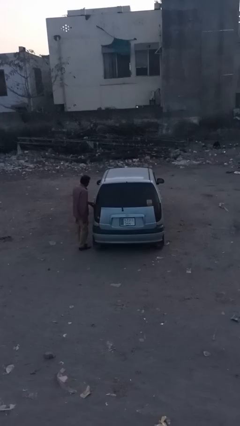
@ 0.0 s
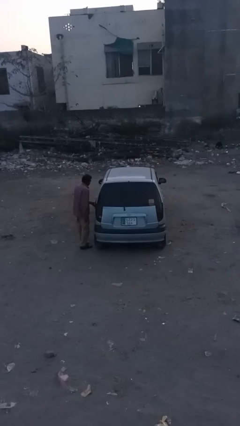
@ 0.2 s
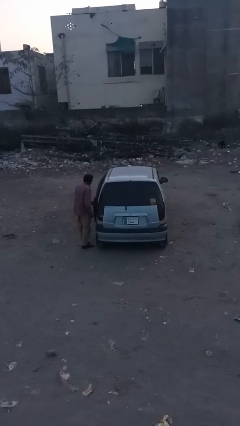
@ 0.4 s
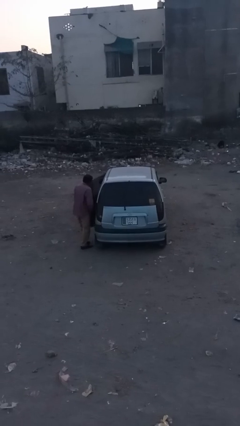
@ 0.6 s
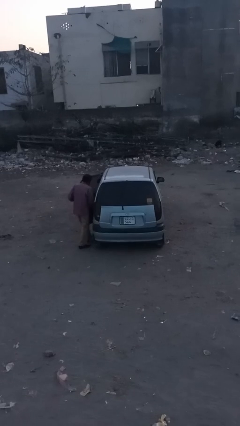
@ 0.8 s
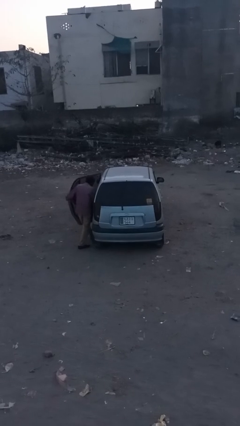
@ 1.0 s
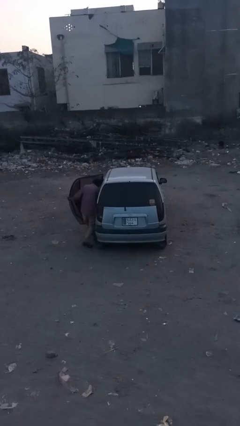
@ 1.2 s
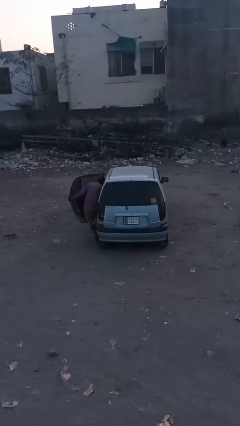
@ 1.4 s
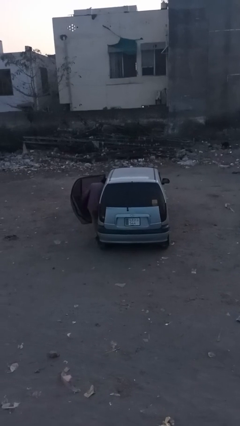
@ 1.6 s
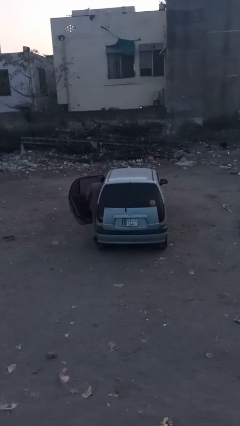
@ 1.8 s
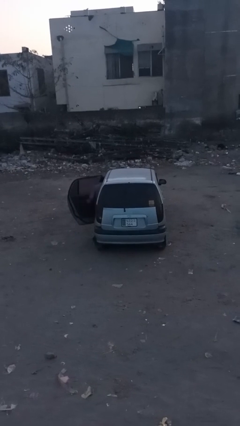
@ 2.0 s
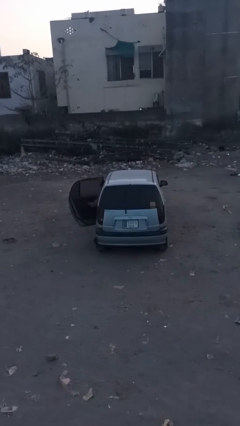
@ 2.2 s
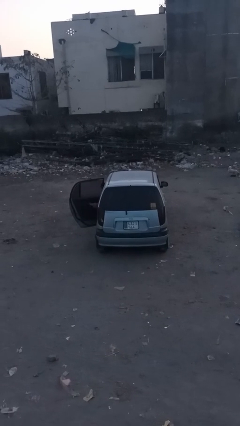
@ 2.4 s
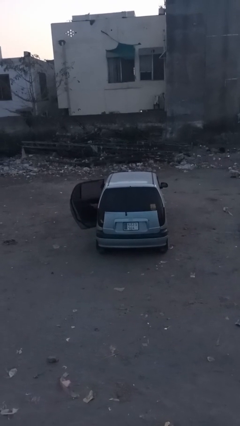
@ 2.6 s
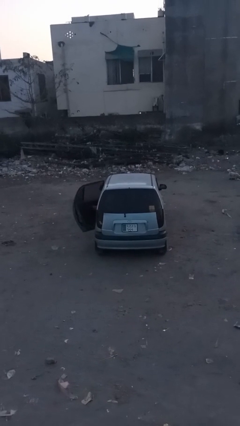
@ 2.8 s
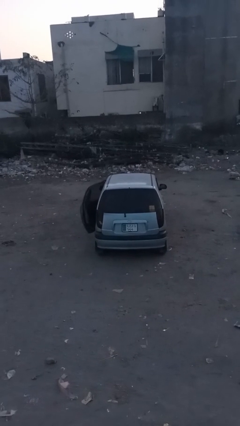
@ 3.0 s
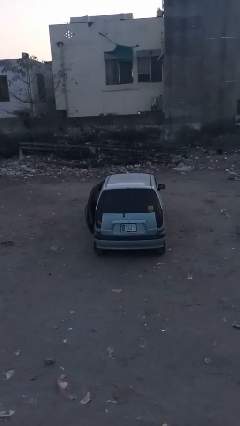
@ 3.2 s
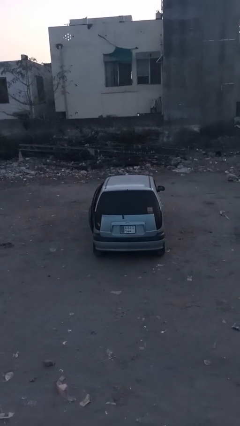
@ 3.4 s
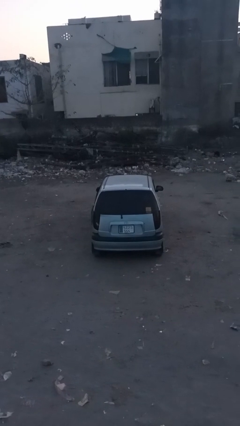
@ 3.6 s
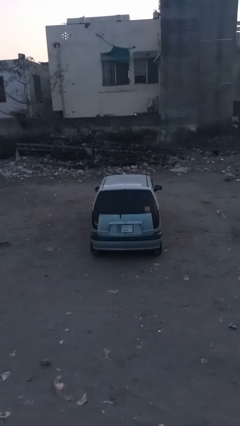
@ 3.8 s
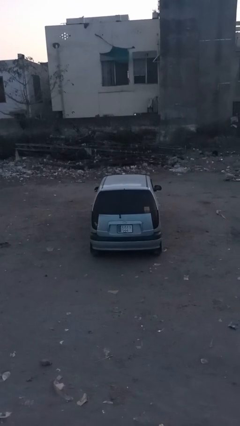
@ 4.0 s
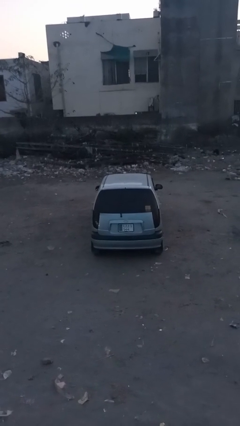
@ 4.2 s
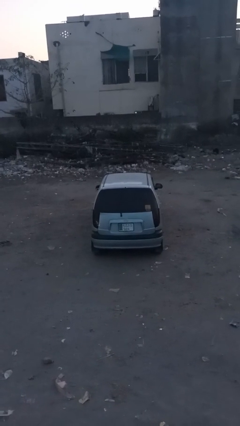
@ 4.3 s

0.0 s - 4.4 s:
car picks up person

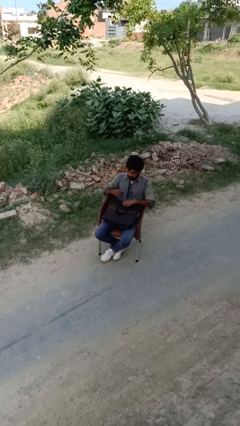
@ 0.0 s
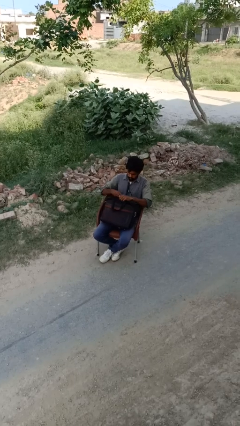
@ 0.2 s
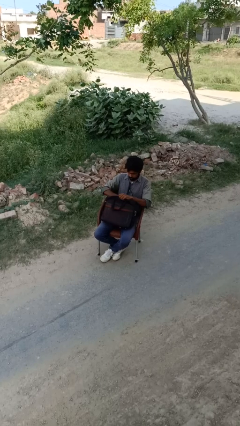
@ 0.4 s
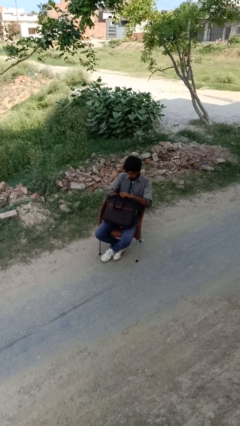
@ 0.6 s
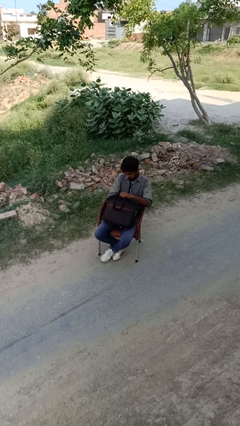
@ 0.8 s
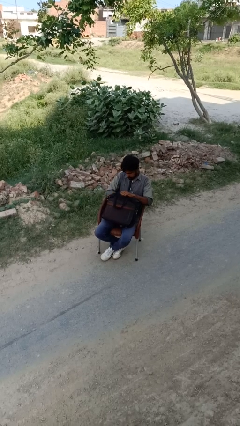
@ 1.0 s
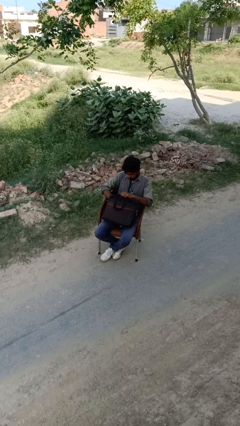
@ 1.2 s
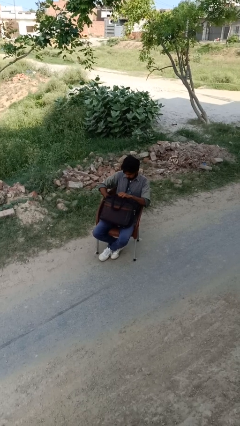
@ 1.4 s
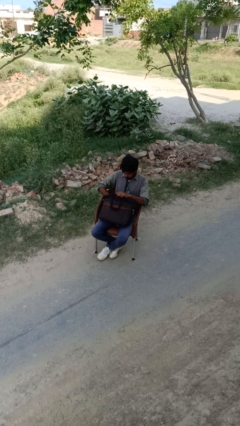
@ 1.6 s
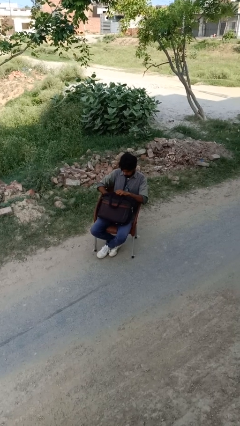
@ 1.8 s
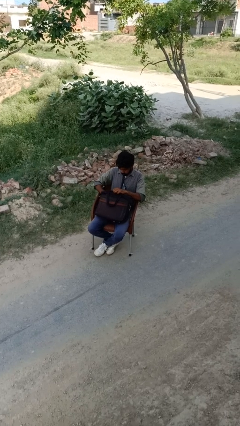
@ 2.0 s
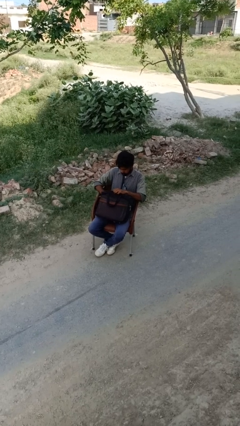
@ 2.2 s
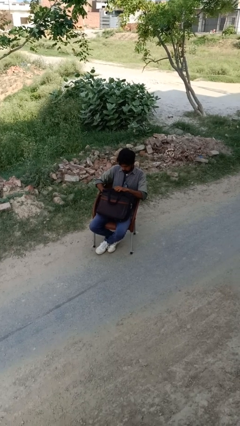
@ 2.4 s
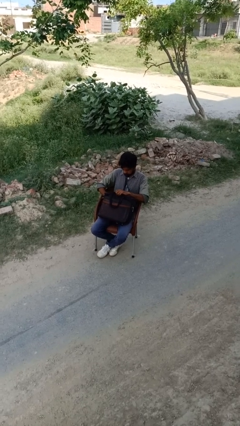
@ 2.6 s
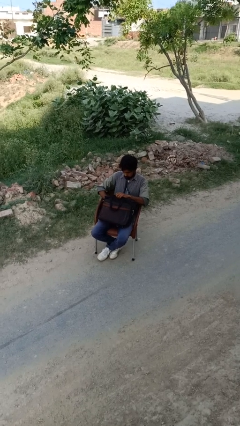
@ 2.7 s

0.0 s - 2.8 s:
person searches in backpack

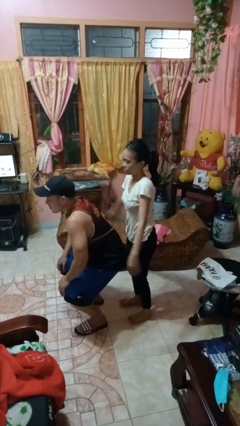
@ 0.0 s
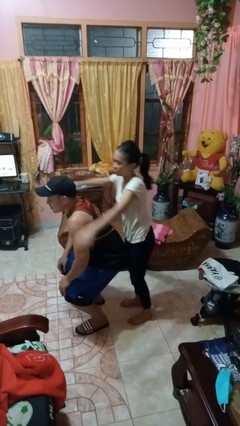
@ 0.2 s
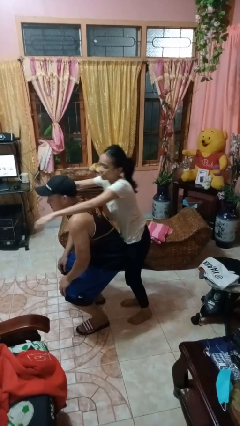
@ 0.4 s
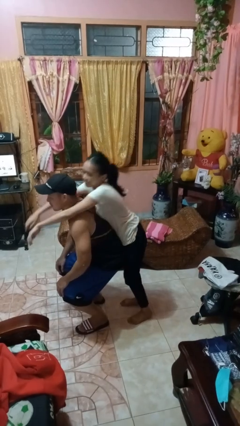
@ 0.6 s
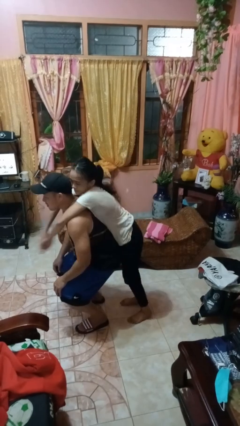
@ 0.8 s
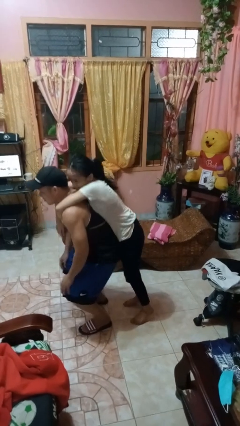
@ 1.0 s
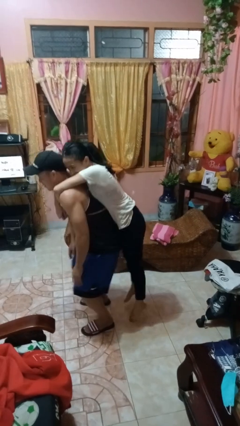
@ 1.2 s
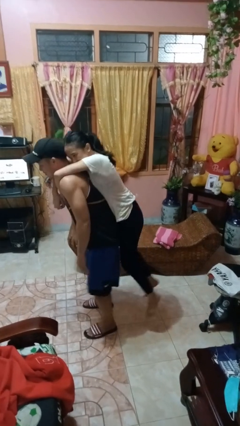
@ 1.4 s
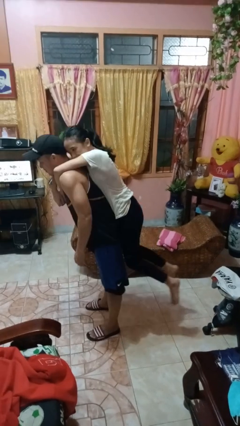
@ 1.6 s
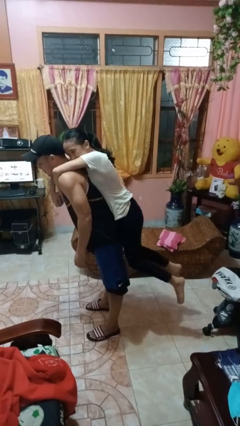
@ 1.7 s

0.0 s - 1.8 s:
person picks up person

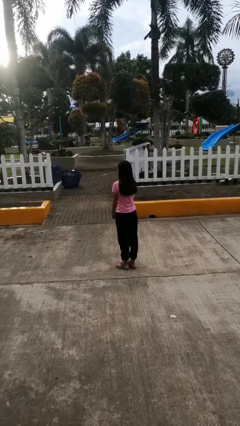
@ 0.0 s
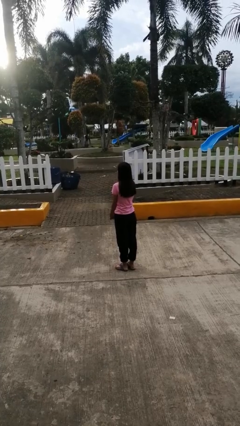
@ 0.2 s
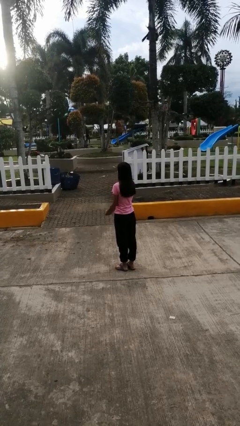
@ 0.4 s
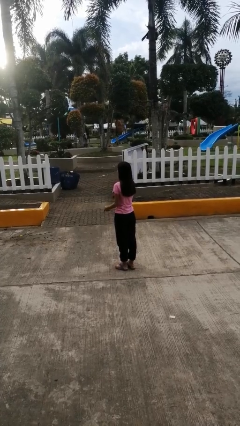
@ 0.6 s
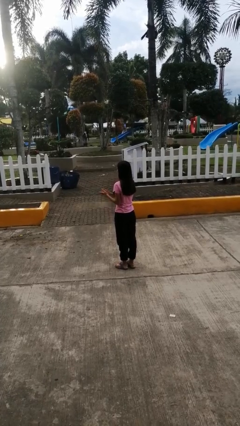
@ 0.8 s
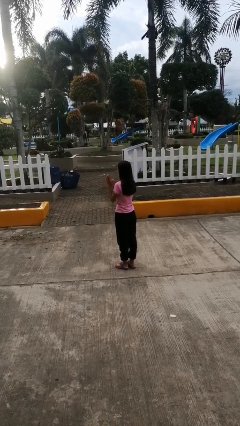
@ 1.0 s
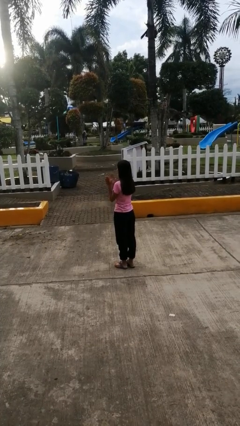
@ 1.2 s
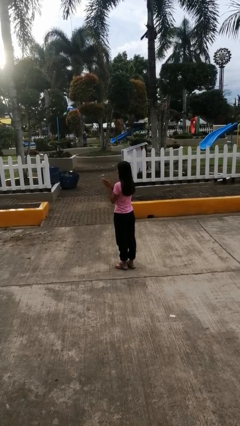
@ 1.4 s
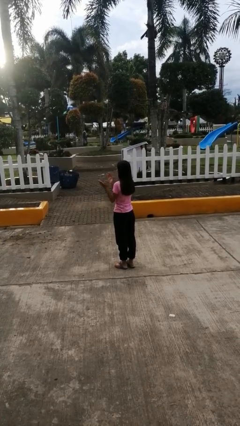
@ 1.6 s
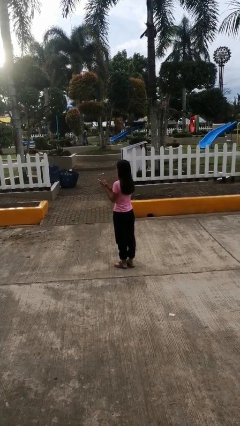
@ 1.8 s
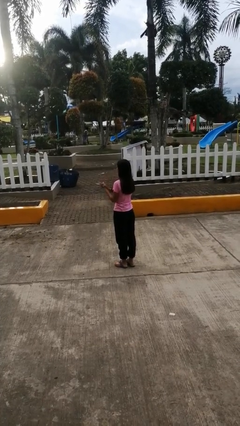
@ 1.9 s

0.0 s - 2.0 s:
person claps hands

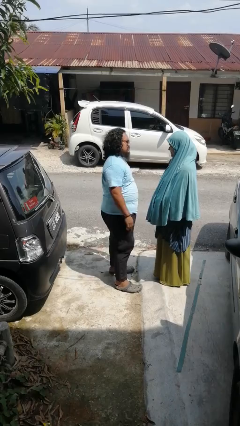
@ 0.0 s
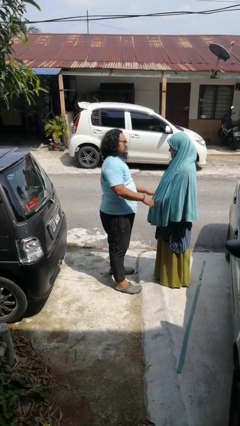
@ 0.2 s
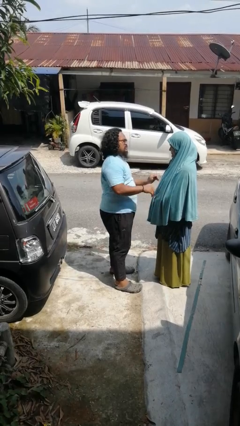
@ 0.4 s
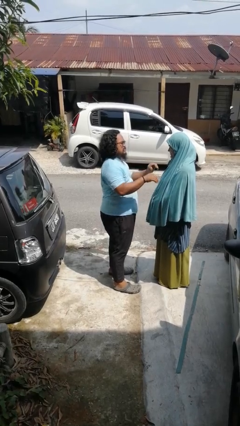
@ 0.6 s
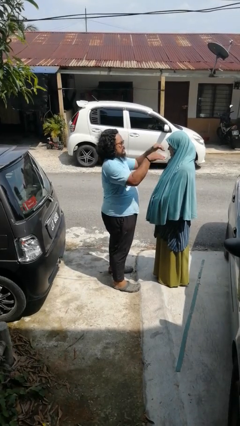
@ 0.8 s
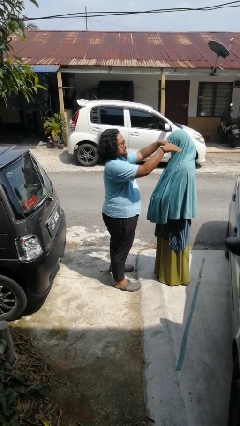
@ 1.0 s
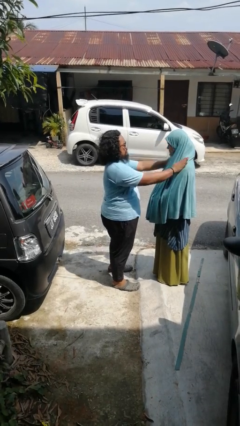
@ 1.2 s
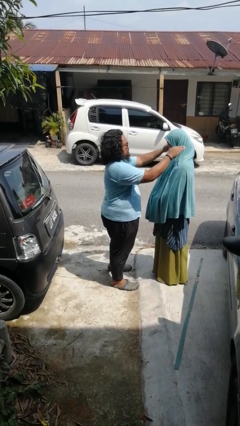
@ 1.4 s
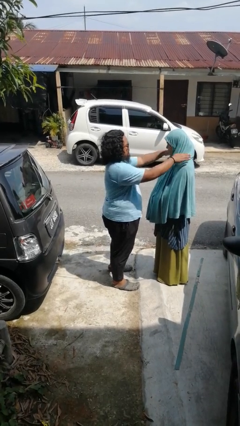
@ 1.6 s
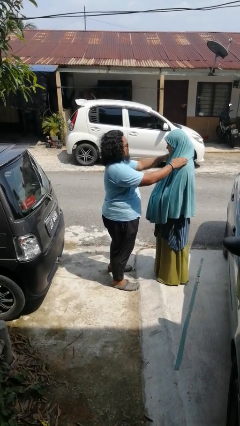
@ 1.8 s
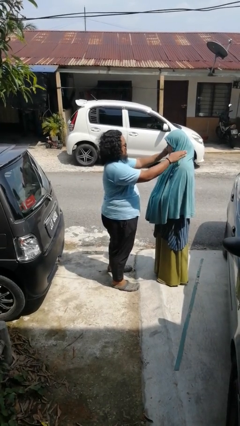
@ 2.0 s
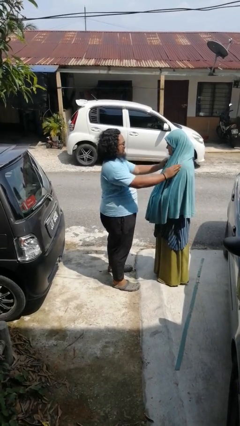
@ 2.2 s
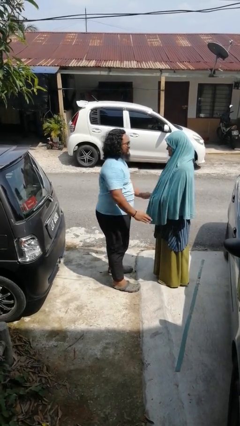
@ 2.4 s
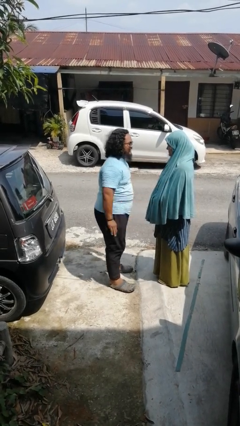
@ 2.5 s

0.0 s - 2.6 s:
person pounds shoulders of person

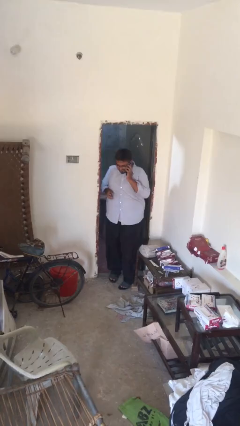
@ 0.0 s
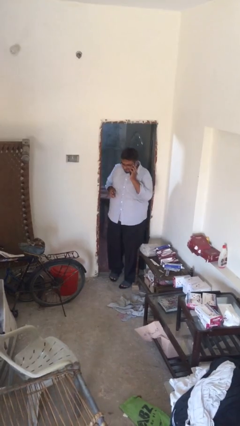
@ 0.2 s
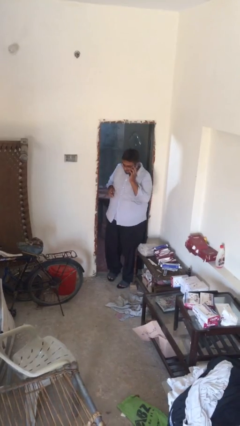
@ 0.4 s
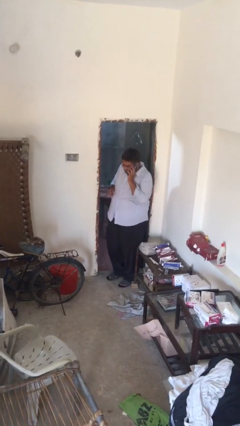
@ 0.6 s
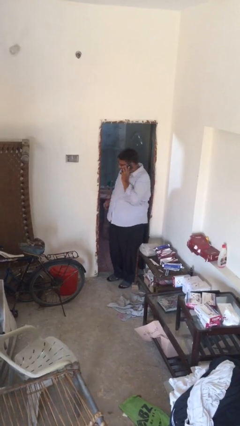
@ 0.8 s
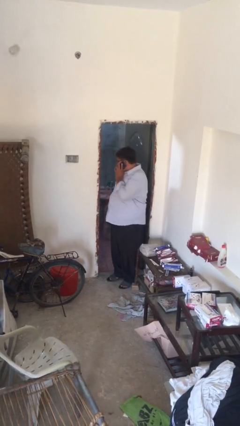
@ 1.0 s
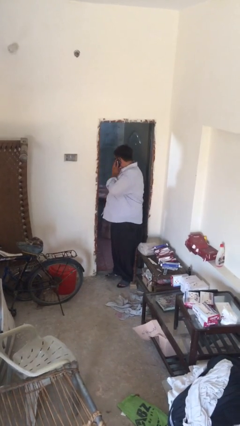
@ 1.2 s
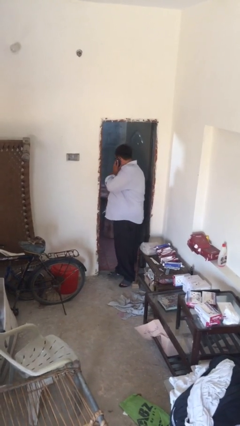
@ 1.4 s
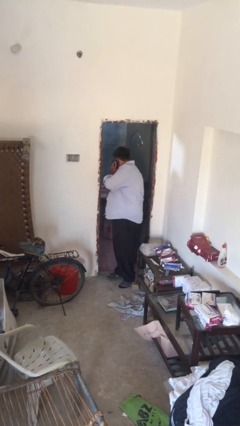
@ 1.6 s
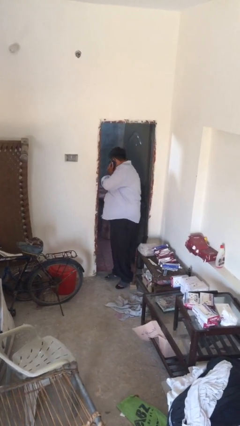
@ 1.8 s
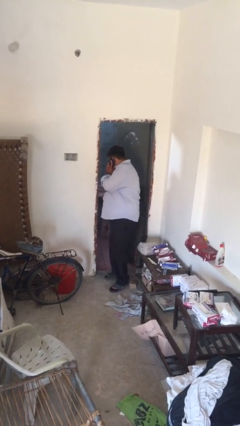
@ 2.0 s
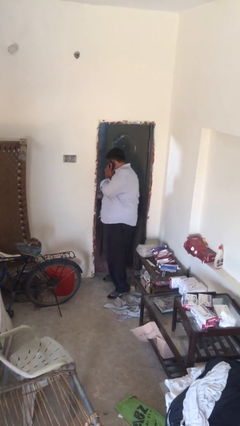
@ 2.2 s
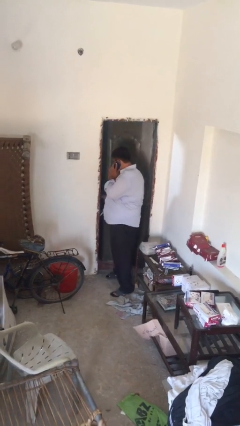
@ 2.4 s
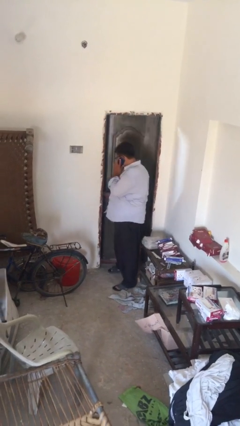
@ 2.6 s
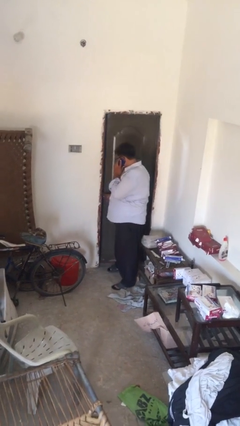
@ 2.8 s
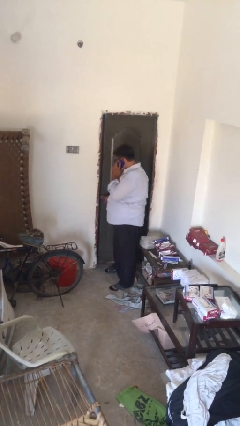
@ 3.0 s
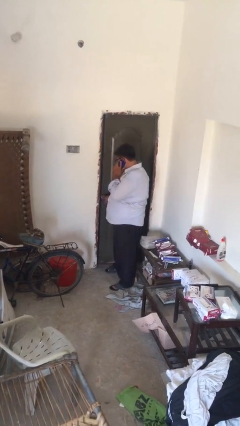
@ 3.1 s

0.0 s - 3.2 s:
person closes facility door

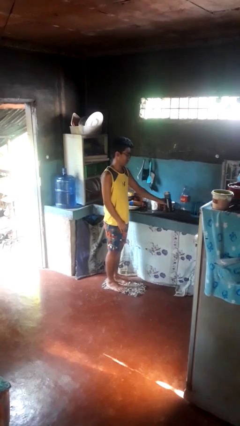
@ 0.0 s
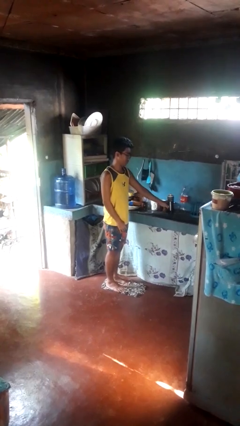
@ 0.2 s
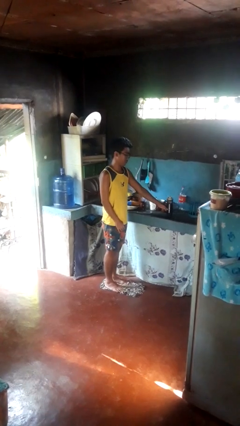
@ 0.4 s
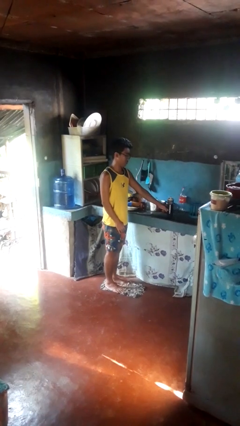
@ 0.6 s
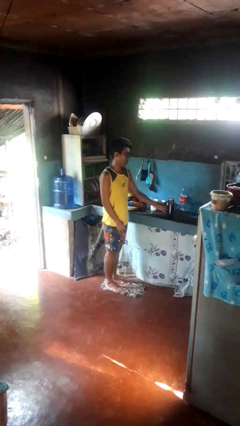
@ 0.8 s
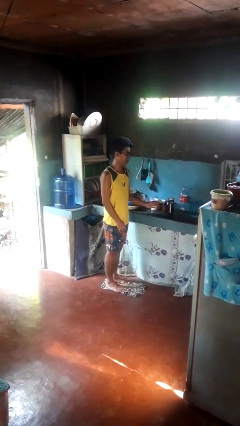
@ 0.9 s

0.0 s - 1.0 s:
person puts down object on countertop
